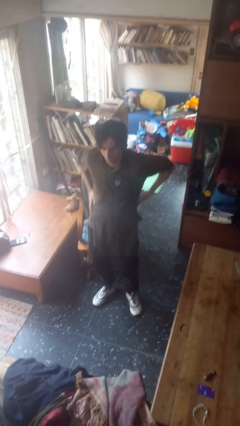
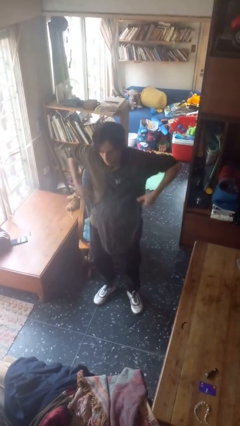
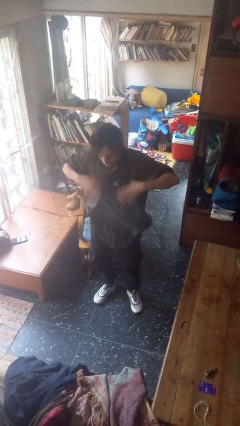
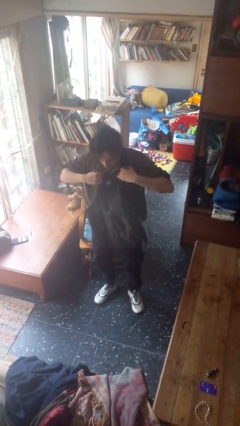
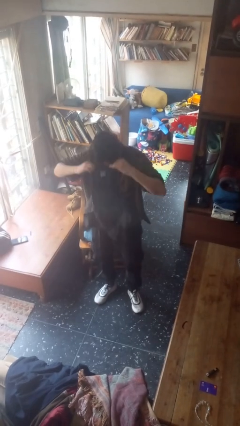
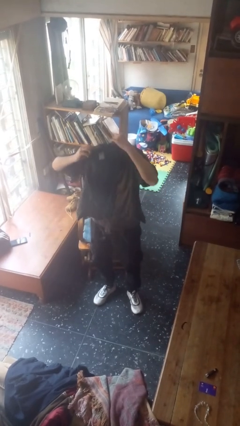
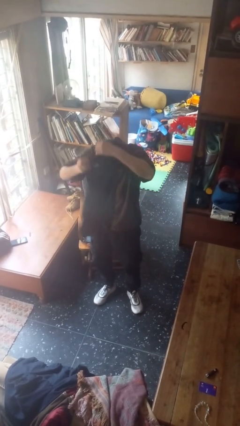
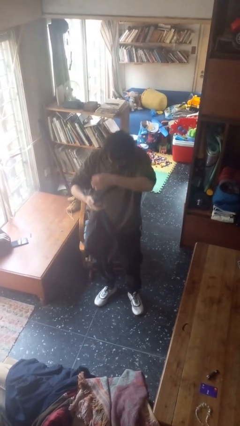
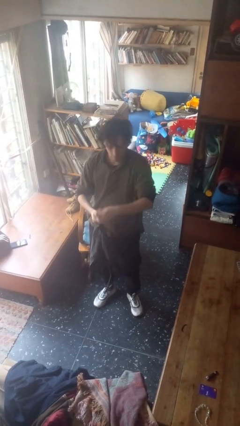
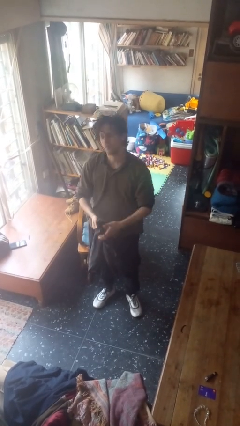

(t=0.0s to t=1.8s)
person takes off apron

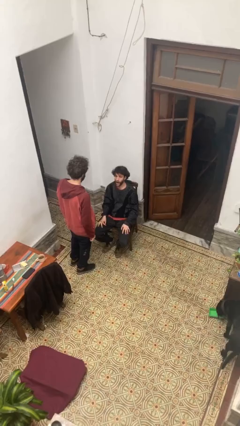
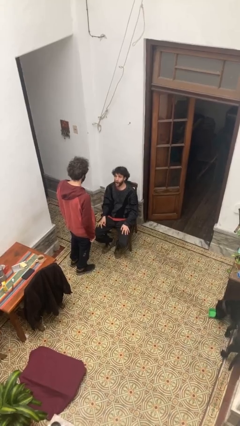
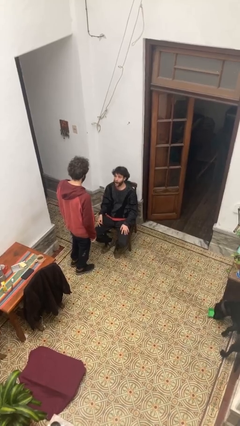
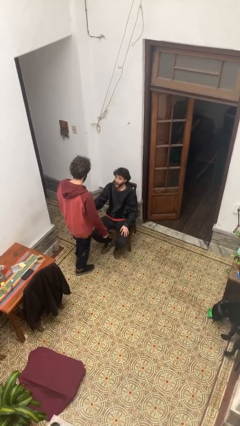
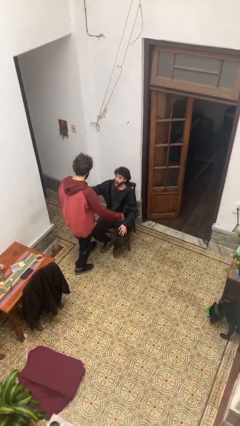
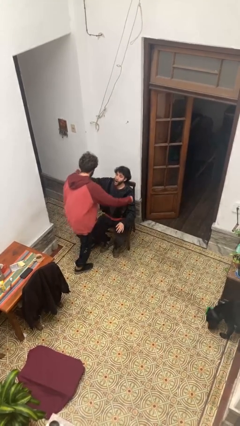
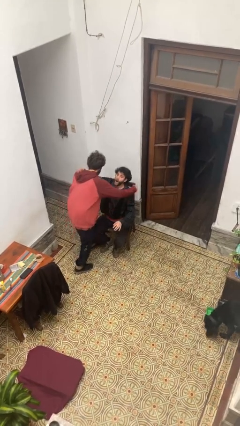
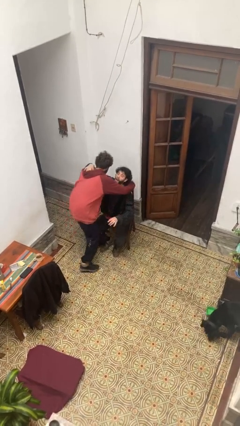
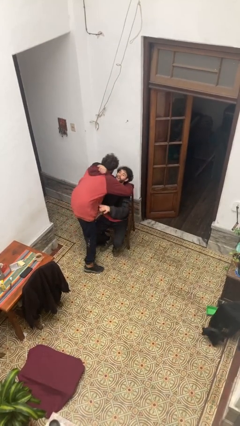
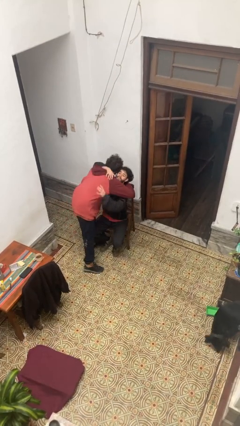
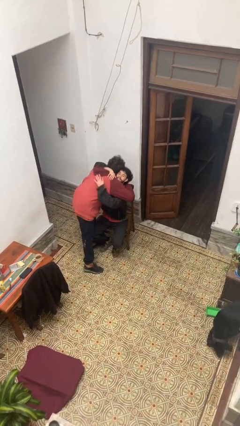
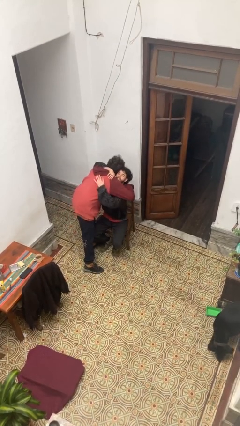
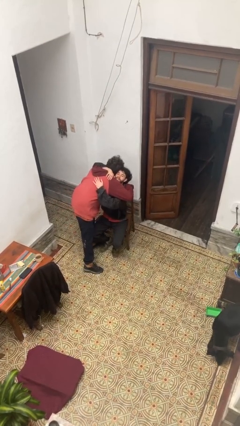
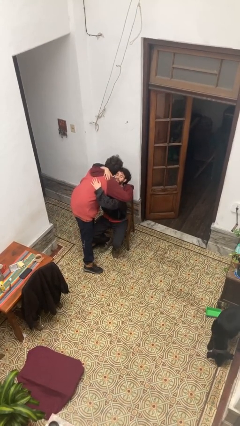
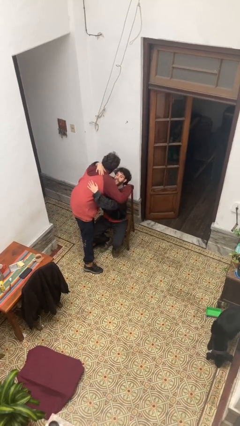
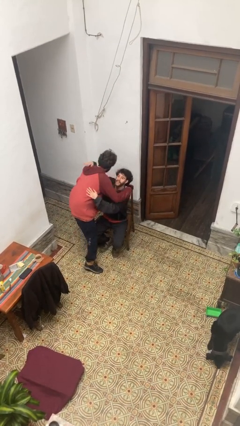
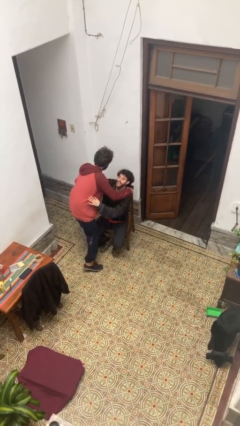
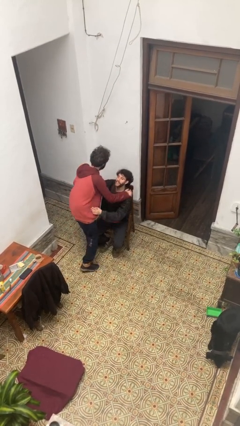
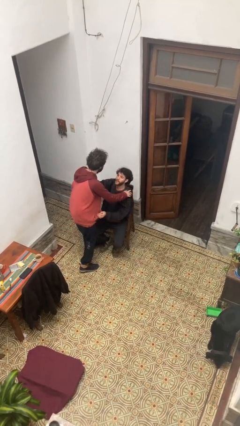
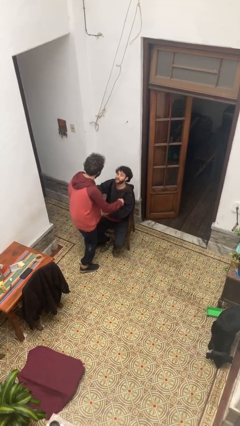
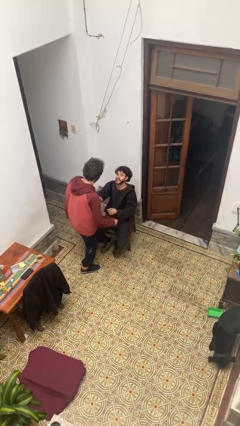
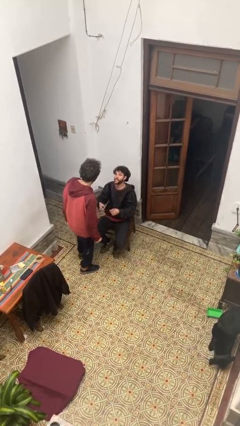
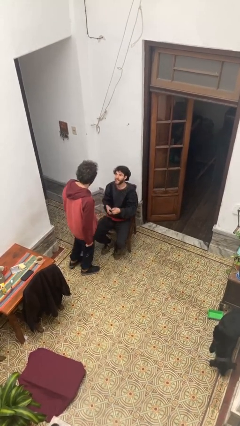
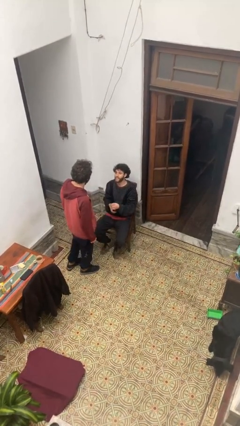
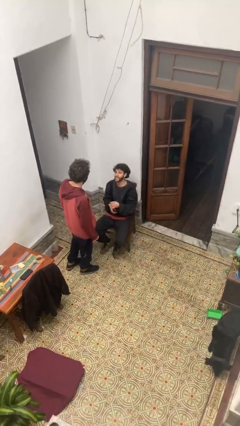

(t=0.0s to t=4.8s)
person embraces person

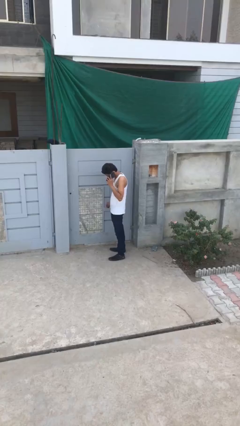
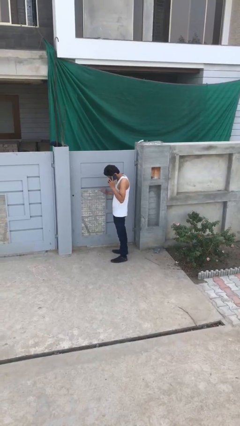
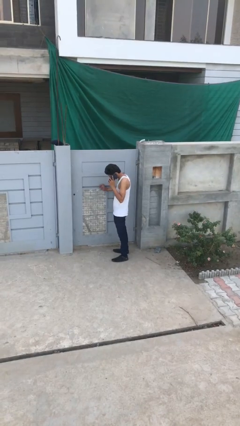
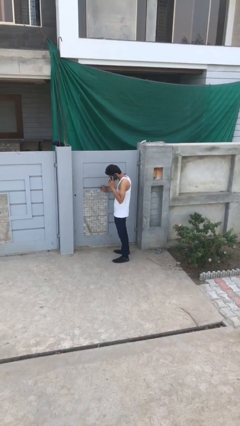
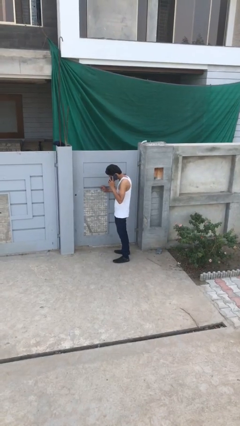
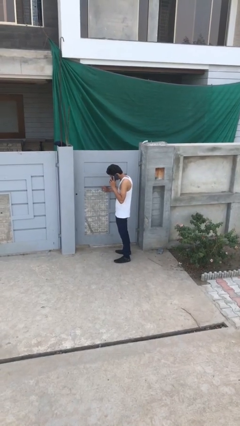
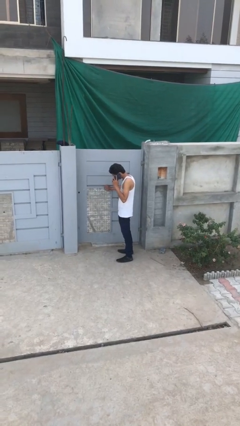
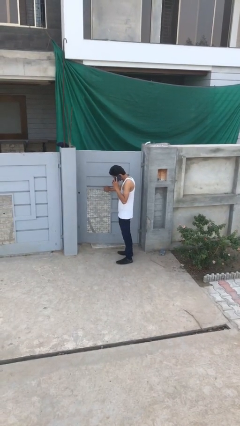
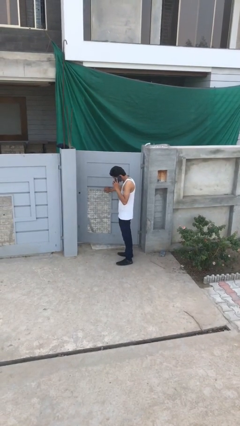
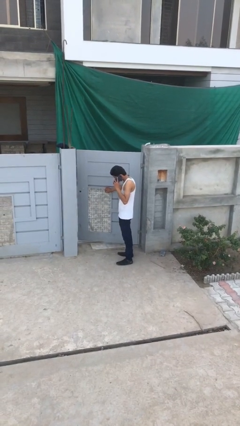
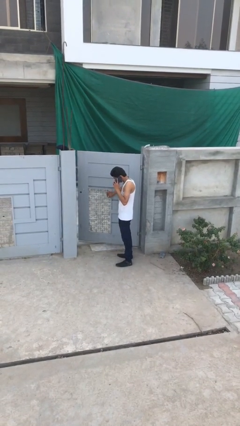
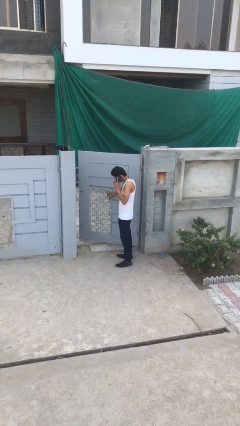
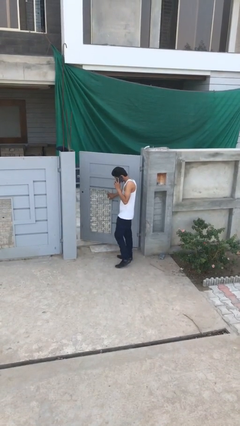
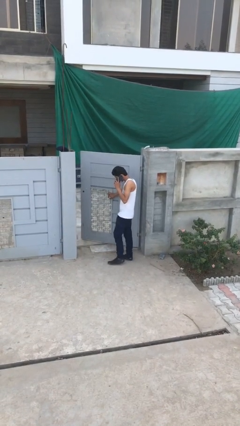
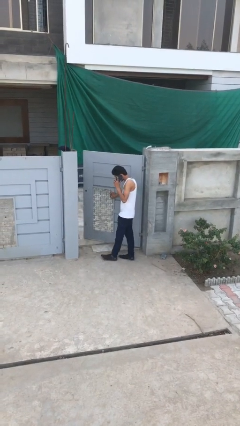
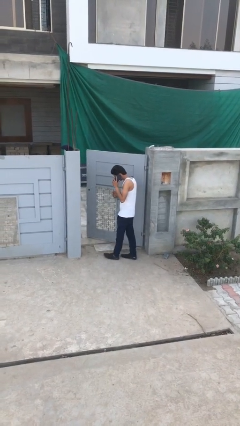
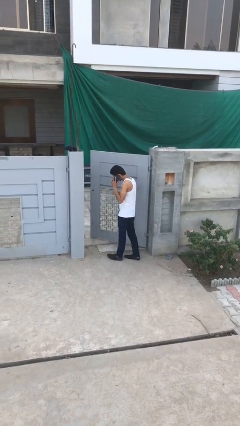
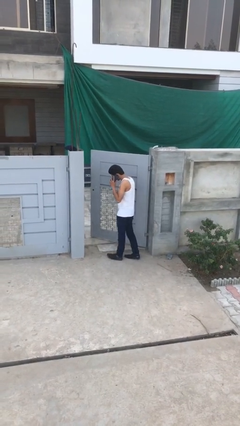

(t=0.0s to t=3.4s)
person opens facility door

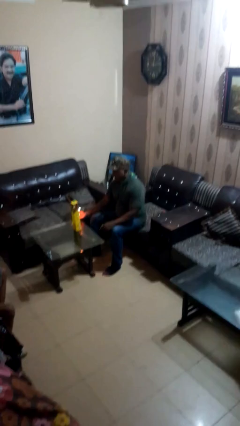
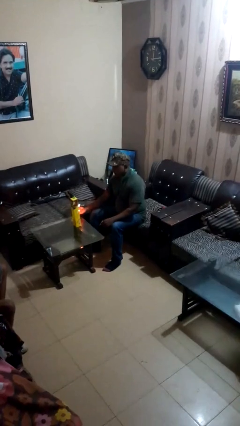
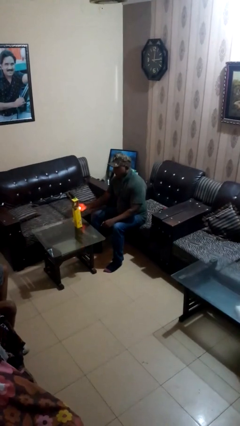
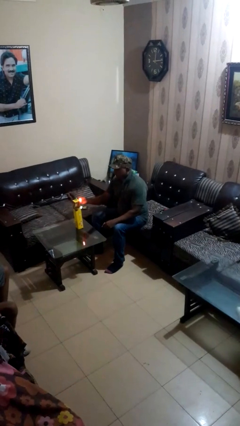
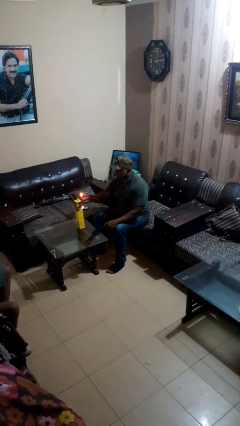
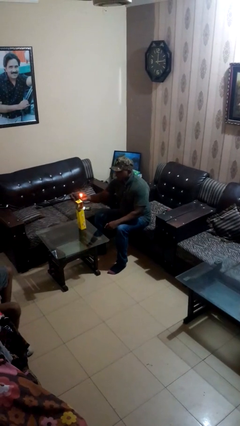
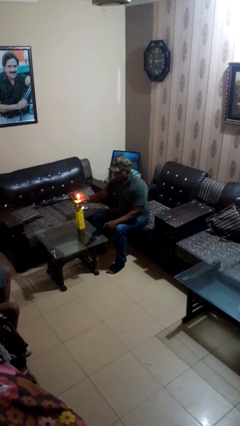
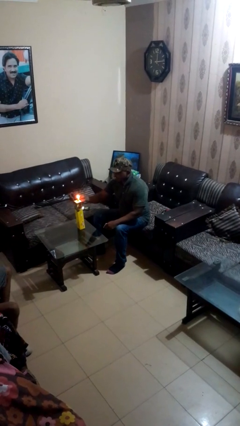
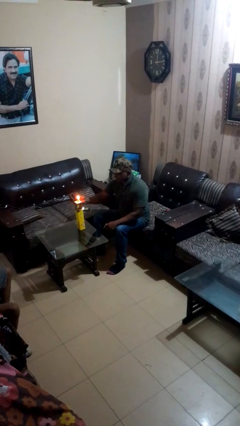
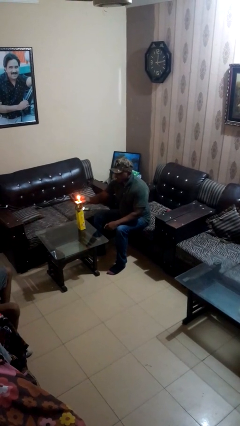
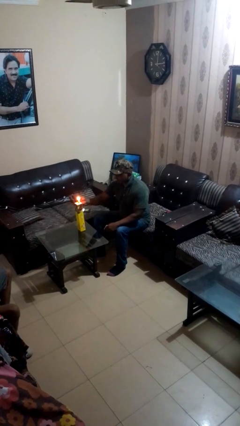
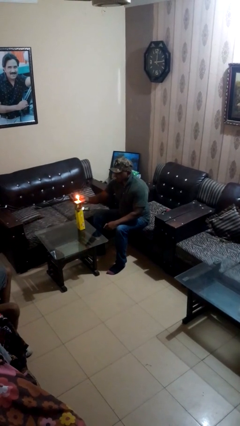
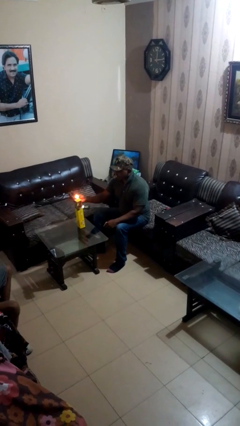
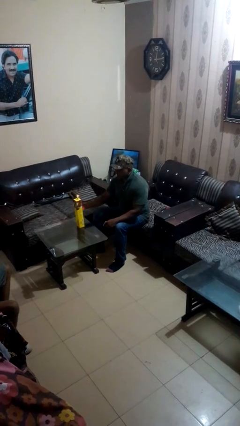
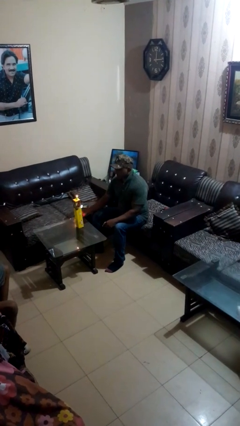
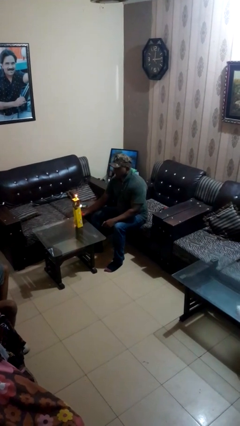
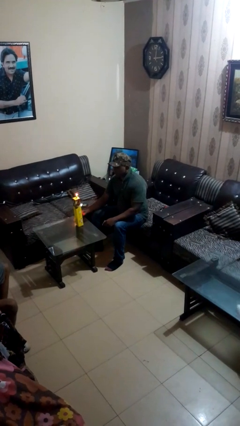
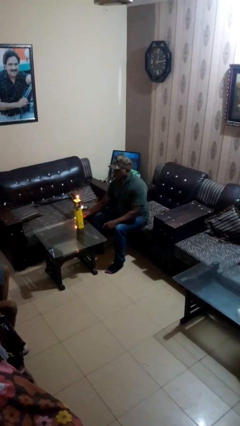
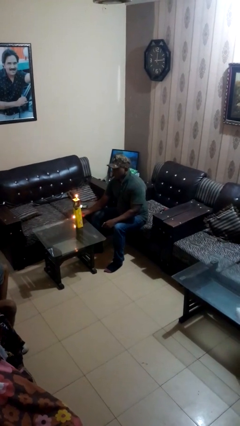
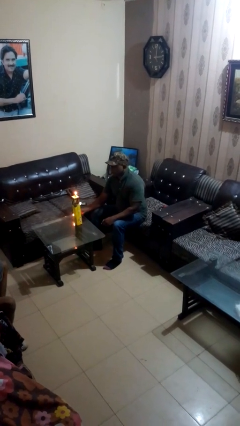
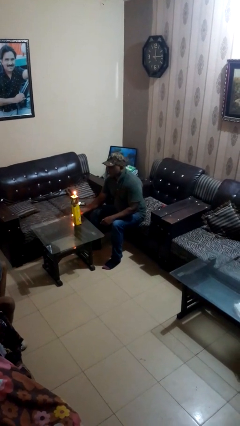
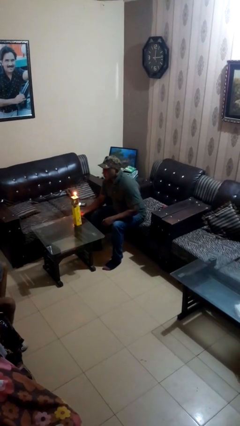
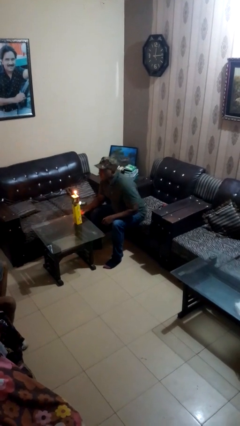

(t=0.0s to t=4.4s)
person lights candle

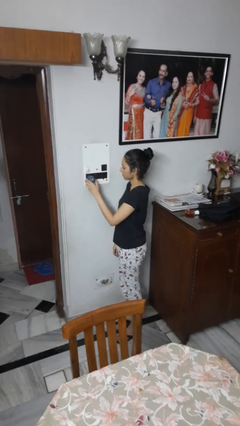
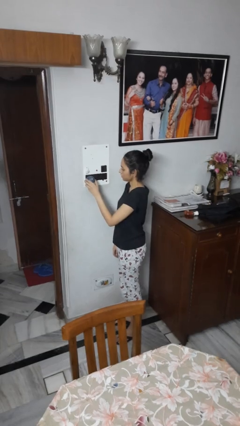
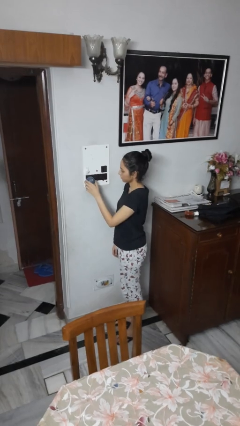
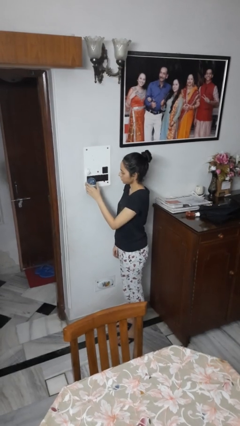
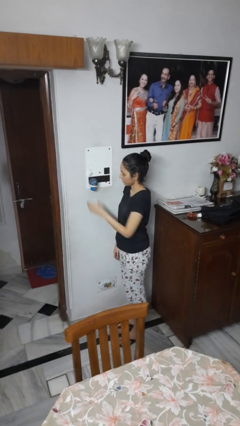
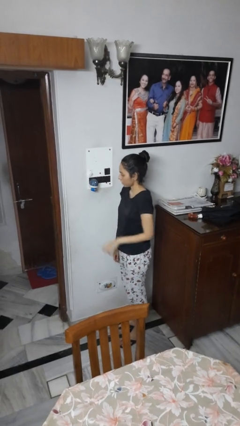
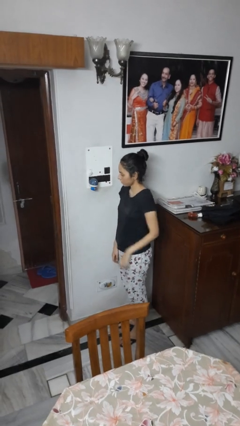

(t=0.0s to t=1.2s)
person plugs into electrical socket

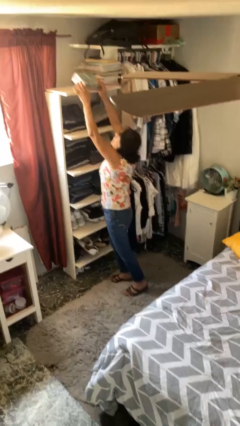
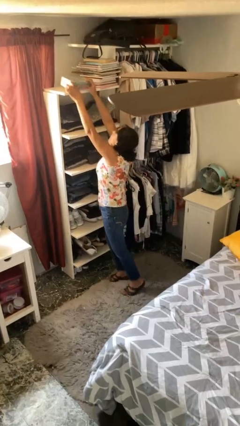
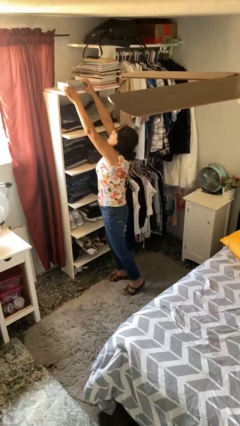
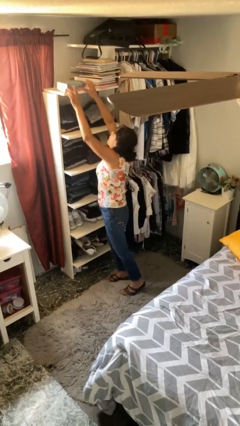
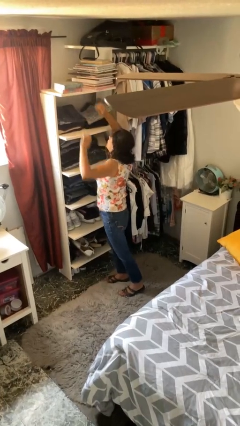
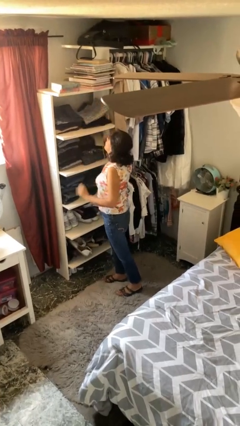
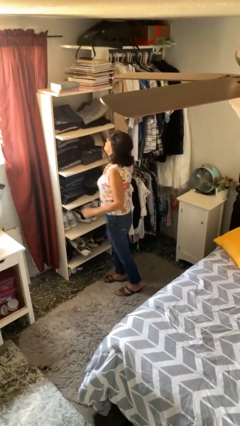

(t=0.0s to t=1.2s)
person puts down object on shelf

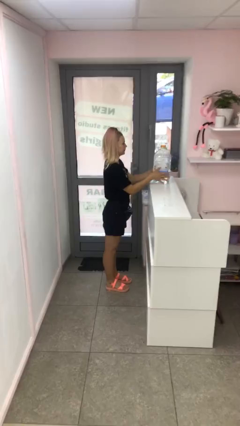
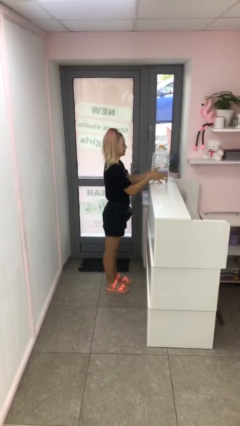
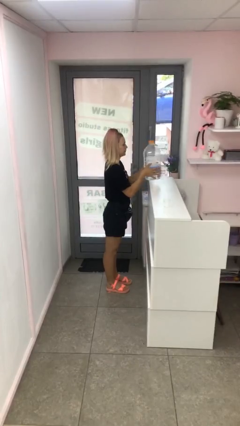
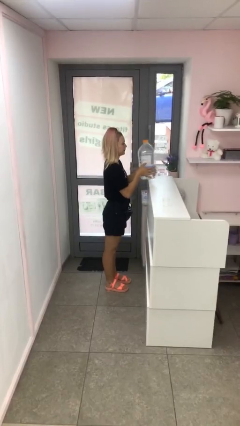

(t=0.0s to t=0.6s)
person picks up object from countertop
